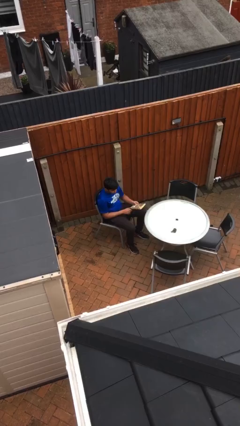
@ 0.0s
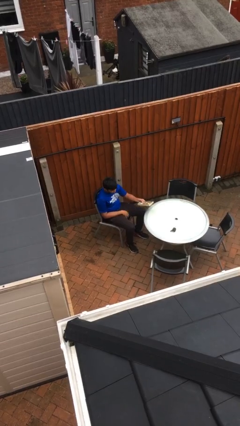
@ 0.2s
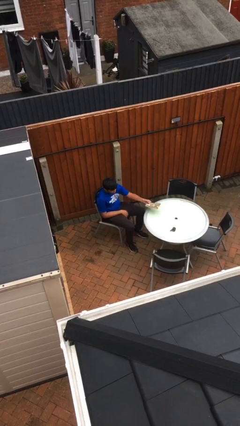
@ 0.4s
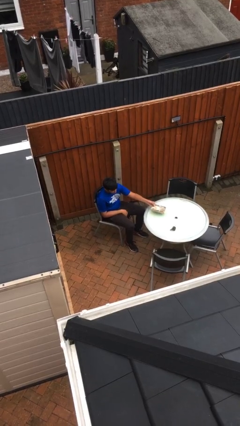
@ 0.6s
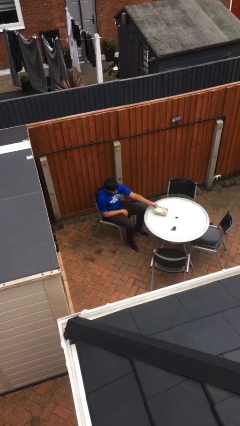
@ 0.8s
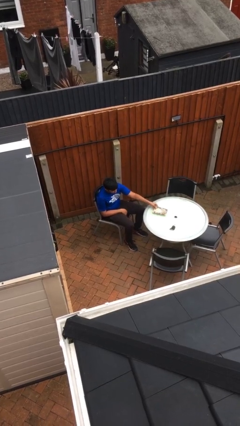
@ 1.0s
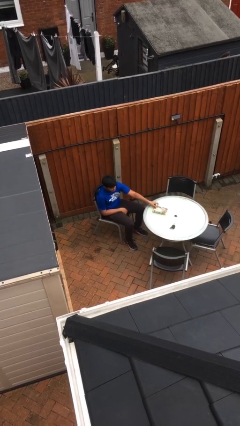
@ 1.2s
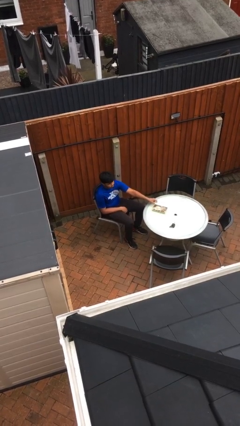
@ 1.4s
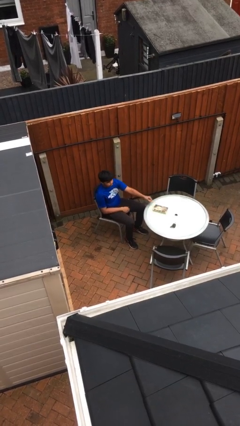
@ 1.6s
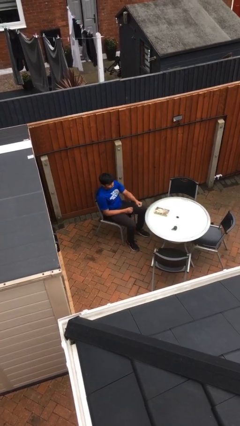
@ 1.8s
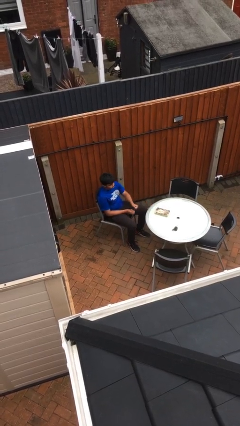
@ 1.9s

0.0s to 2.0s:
person puts down object on table

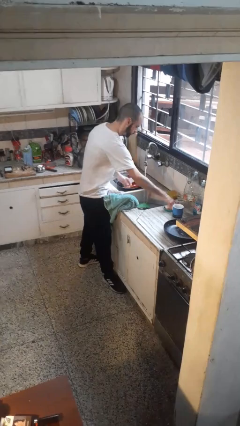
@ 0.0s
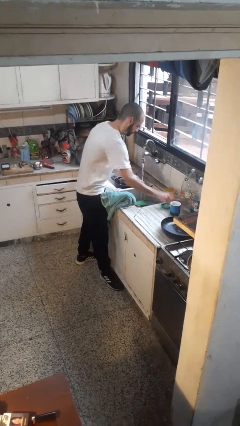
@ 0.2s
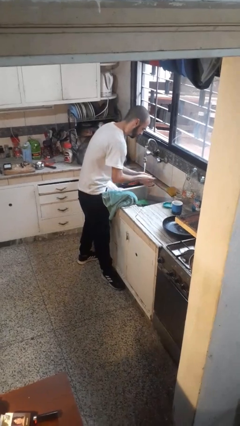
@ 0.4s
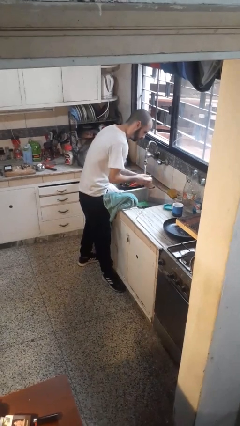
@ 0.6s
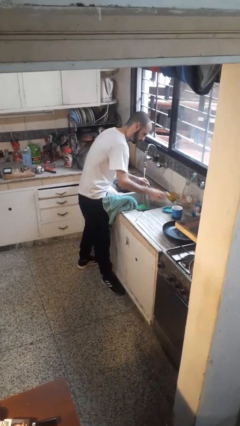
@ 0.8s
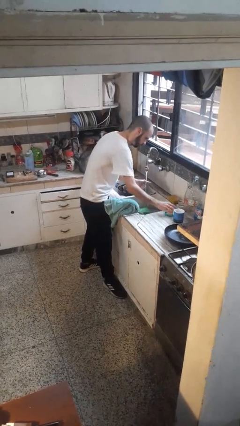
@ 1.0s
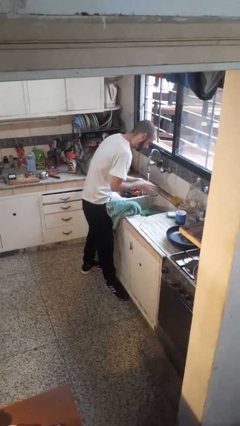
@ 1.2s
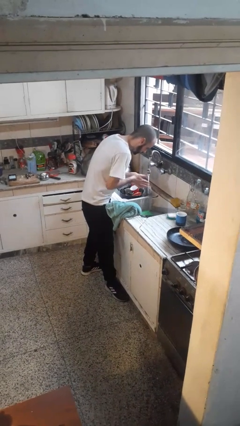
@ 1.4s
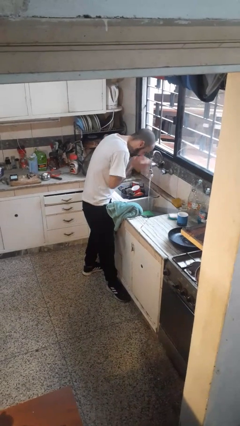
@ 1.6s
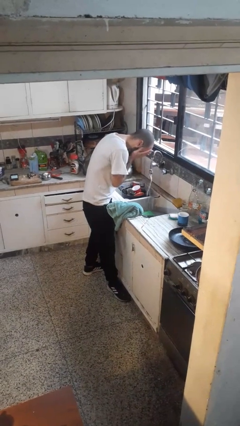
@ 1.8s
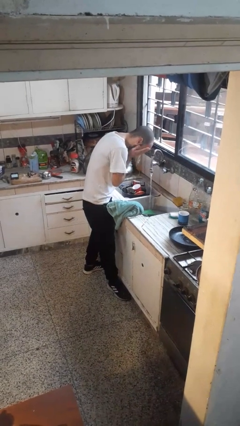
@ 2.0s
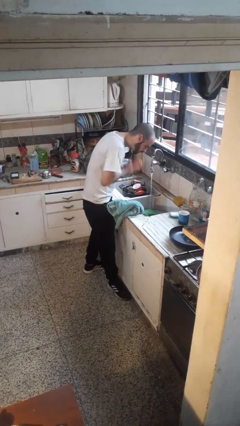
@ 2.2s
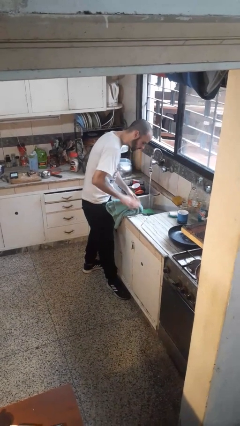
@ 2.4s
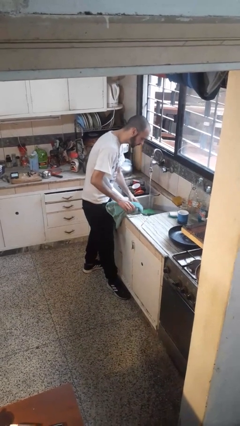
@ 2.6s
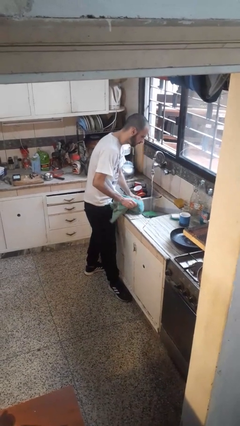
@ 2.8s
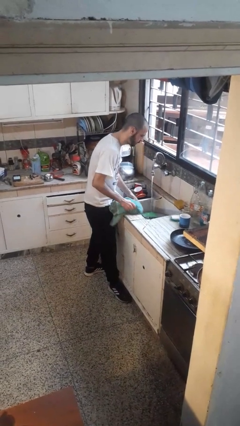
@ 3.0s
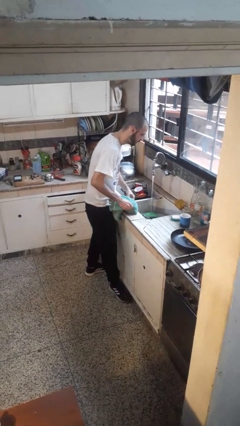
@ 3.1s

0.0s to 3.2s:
person washes face

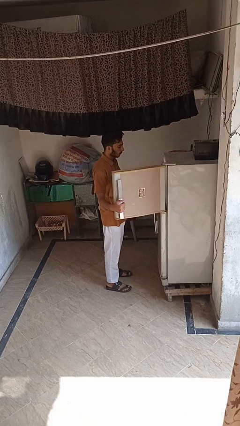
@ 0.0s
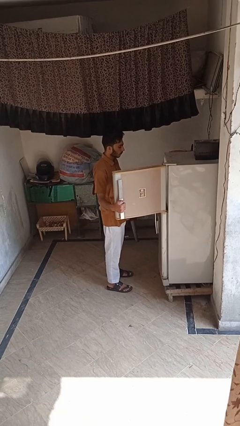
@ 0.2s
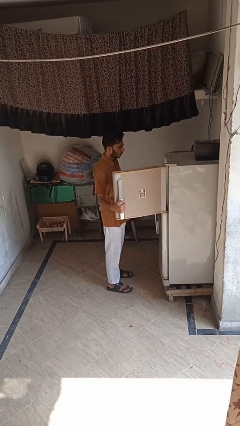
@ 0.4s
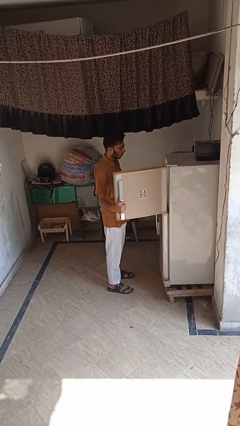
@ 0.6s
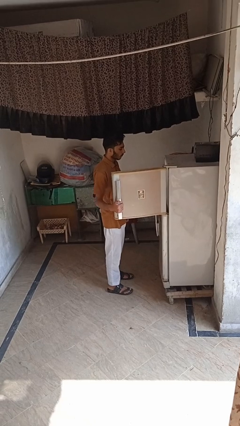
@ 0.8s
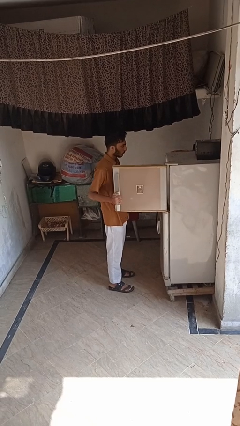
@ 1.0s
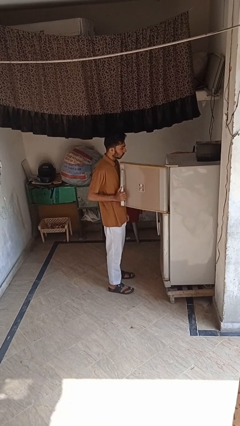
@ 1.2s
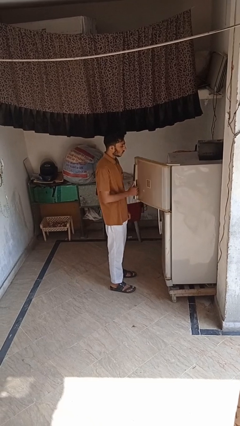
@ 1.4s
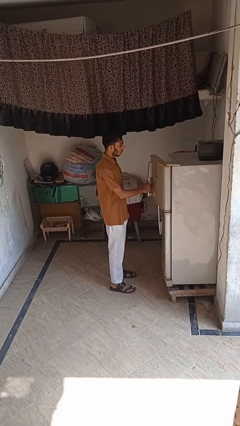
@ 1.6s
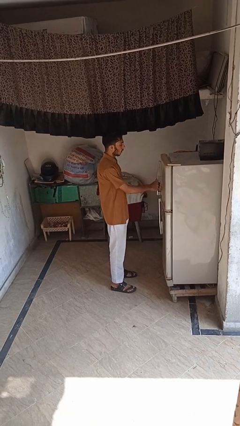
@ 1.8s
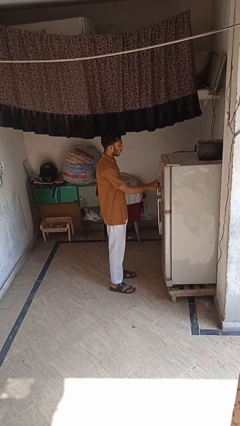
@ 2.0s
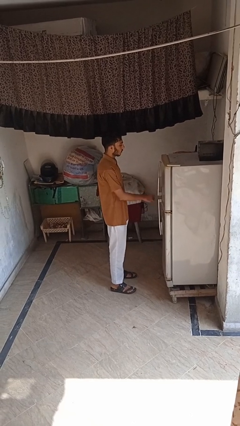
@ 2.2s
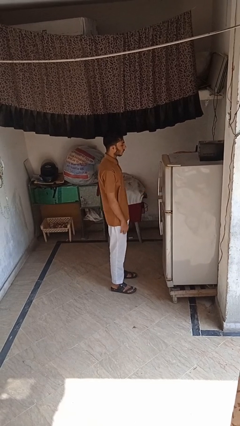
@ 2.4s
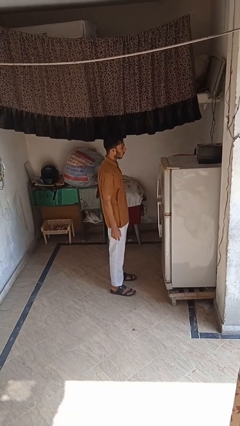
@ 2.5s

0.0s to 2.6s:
person closes refrigerator

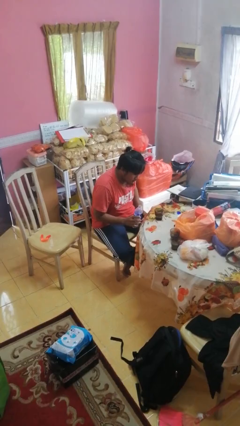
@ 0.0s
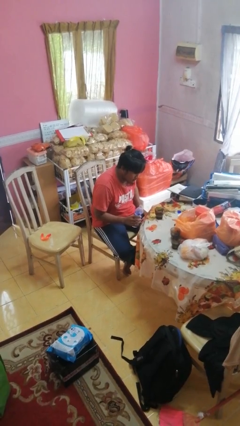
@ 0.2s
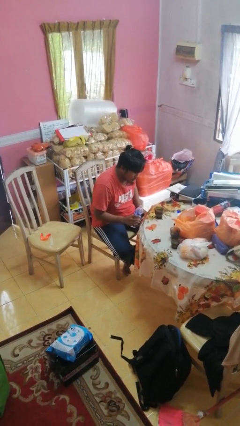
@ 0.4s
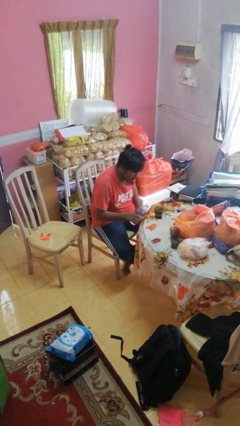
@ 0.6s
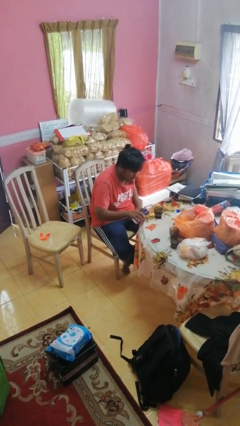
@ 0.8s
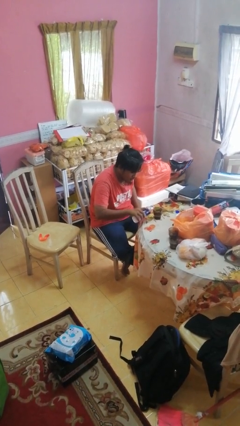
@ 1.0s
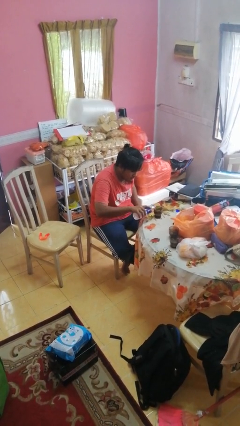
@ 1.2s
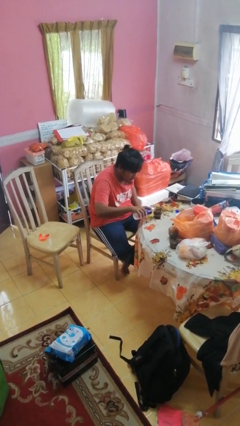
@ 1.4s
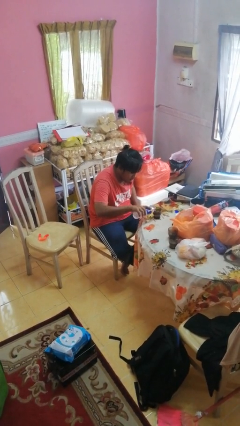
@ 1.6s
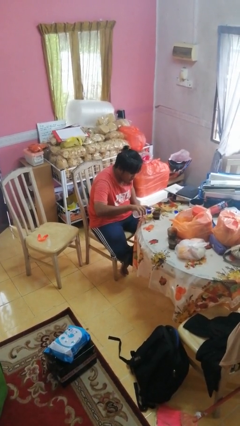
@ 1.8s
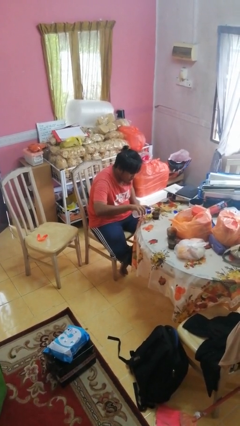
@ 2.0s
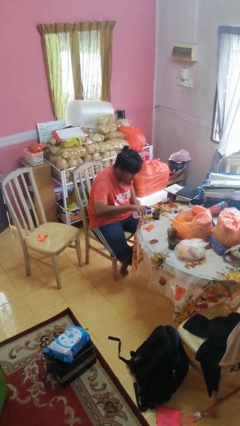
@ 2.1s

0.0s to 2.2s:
person pours liquid into cup

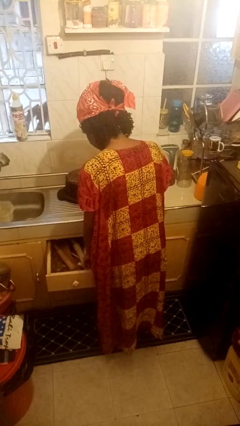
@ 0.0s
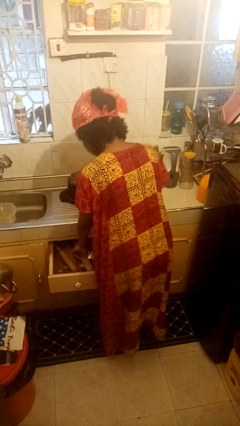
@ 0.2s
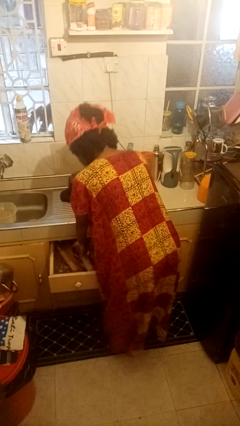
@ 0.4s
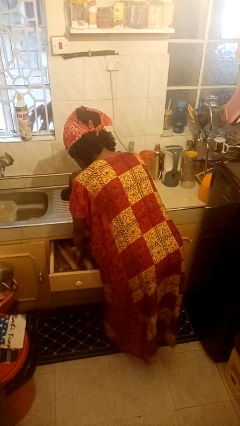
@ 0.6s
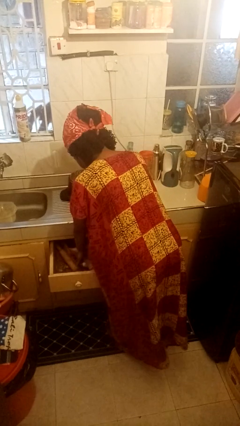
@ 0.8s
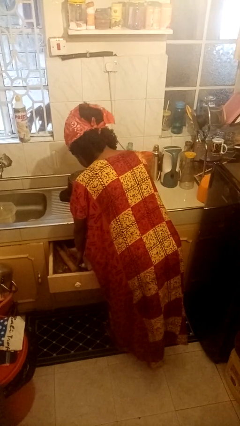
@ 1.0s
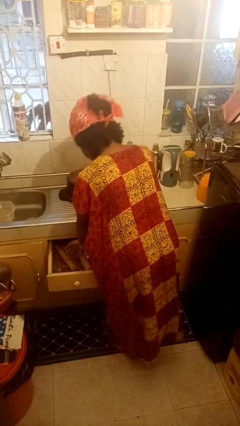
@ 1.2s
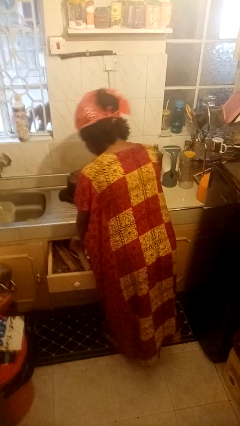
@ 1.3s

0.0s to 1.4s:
person searches in kitchen drawer

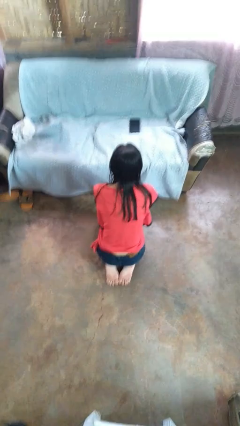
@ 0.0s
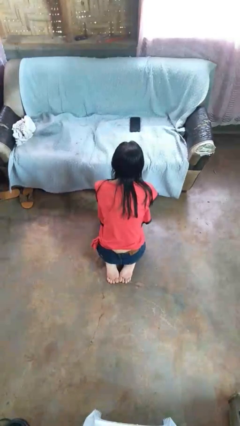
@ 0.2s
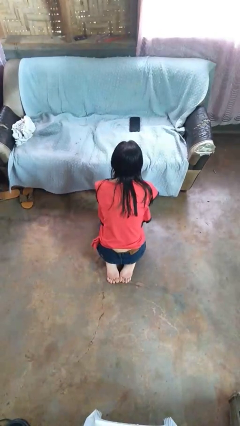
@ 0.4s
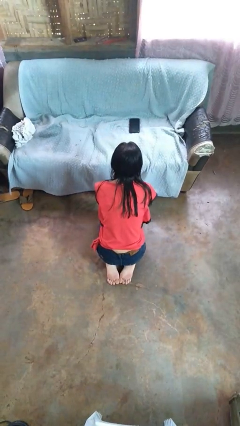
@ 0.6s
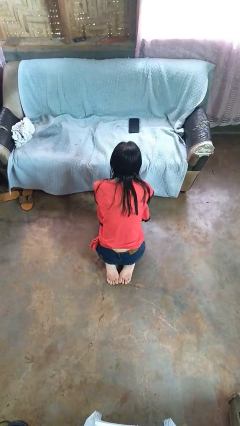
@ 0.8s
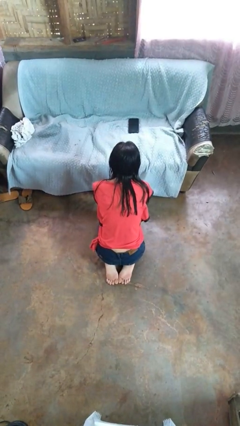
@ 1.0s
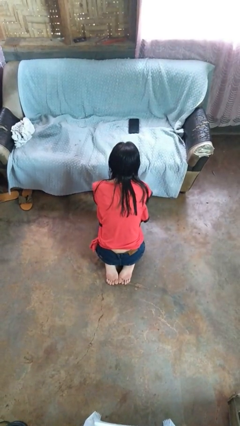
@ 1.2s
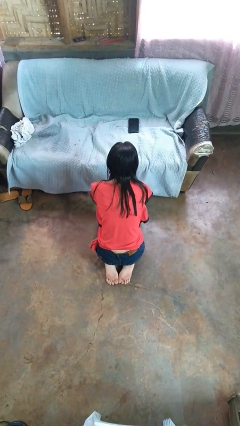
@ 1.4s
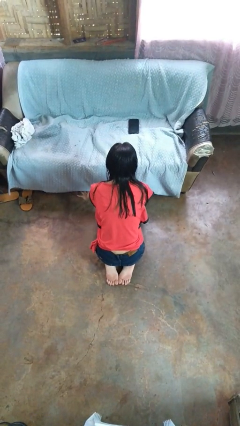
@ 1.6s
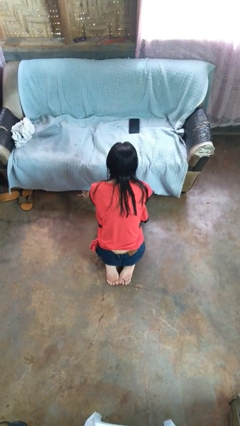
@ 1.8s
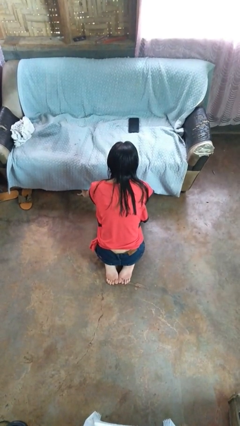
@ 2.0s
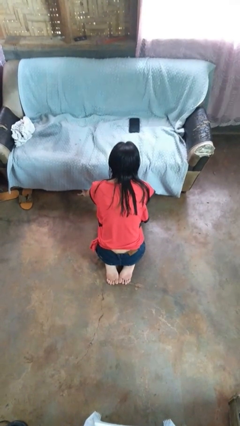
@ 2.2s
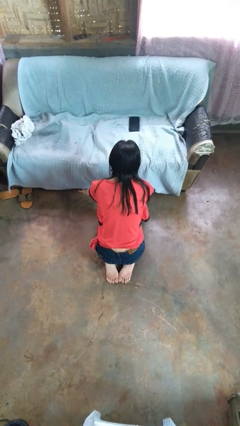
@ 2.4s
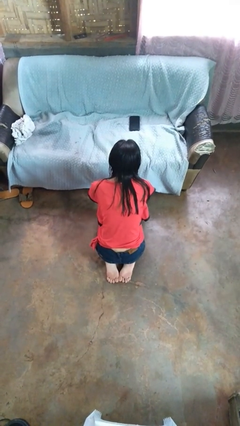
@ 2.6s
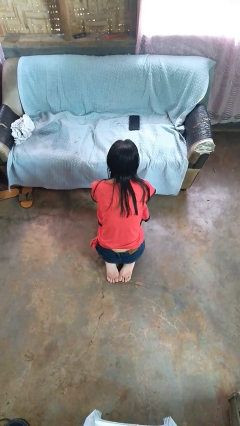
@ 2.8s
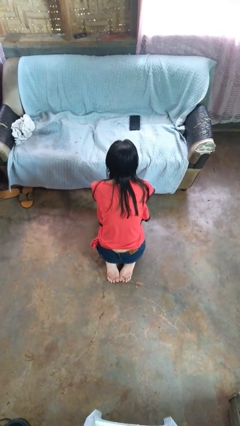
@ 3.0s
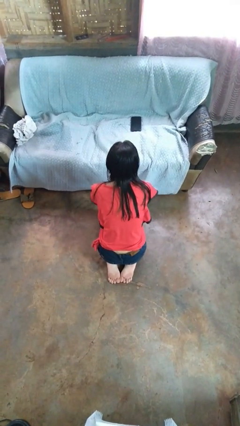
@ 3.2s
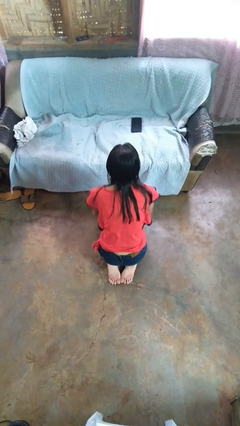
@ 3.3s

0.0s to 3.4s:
person searches under couch

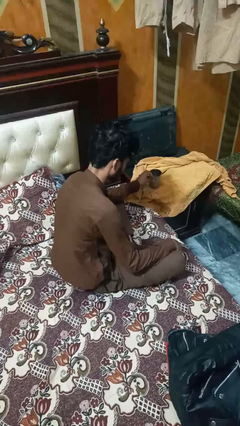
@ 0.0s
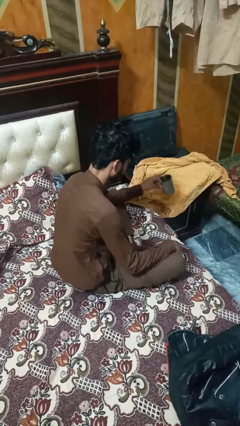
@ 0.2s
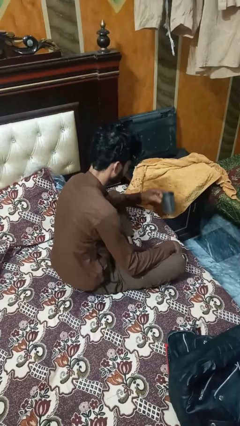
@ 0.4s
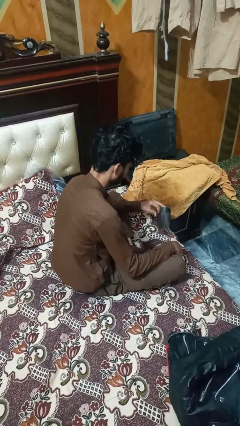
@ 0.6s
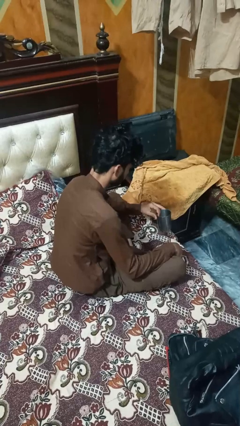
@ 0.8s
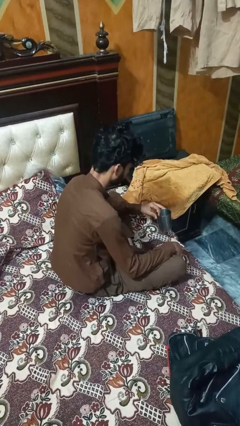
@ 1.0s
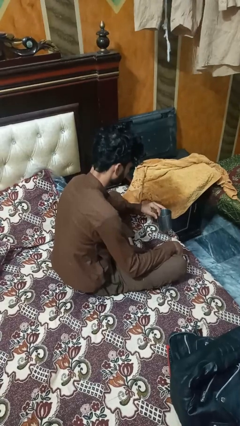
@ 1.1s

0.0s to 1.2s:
person picks up object from table

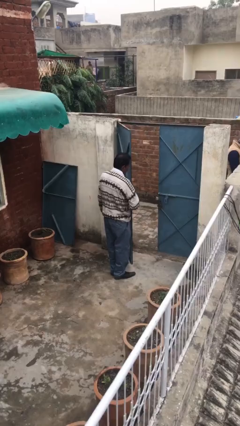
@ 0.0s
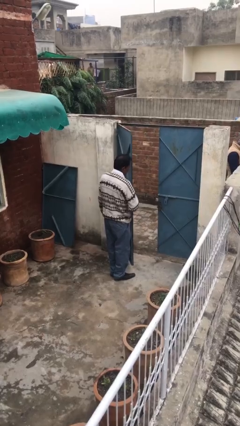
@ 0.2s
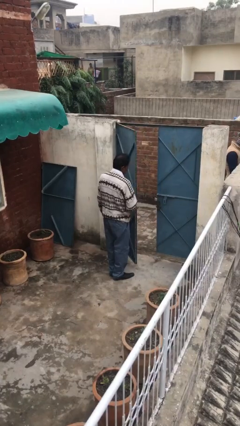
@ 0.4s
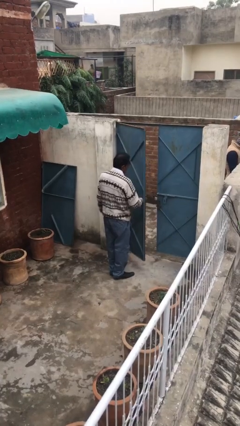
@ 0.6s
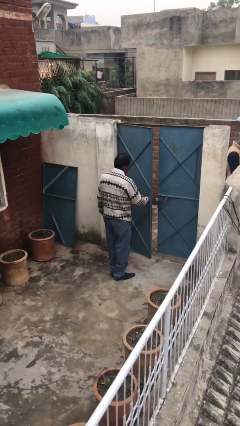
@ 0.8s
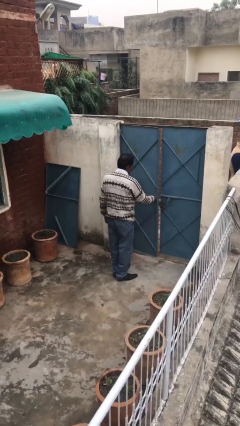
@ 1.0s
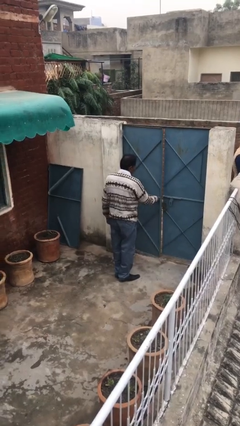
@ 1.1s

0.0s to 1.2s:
person closes facility door
